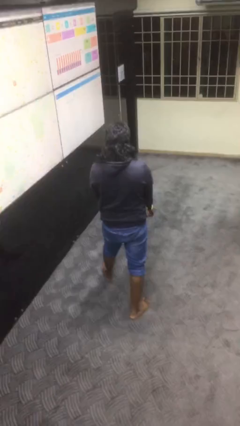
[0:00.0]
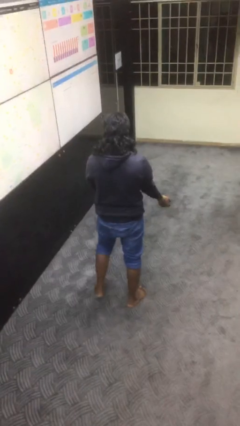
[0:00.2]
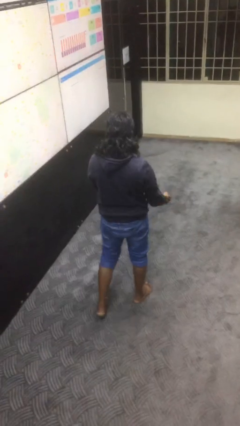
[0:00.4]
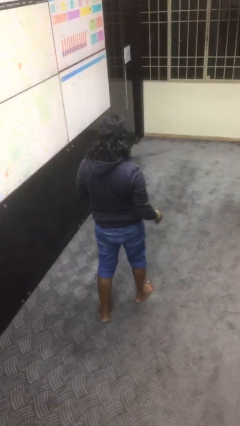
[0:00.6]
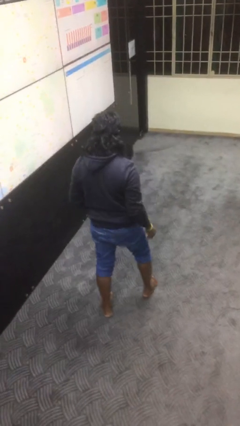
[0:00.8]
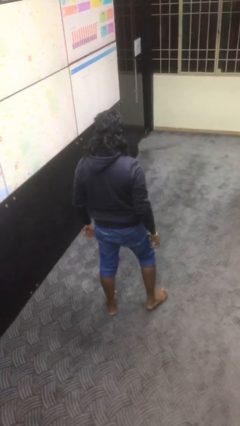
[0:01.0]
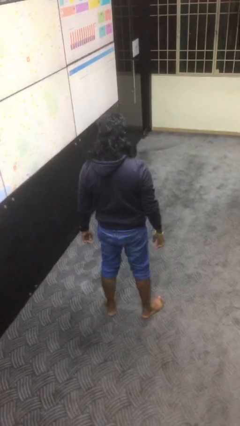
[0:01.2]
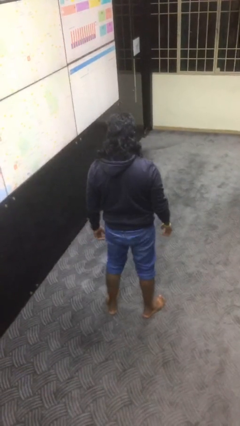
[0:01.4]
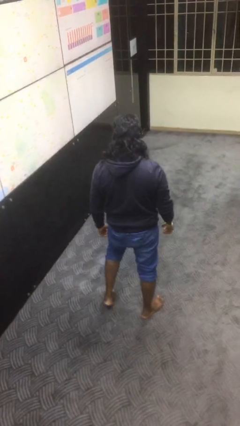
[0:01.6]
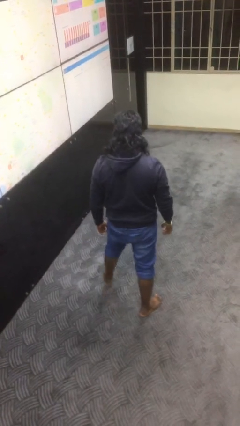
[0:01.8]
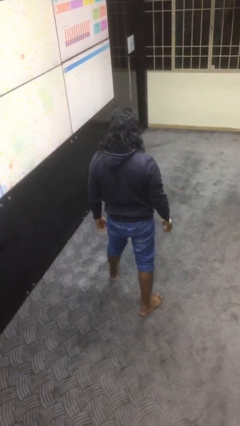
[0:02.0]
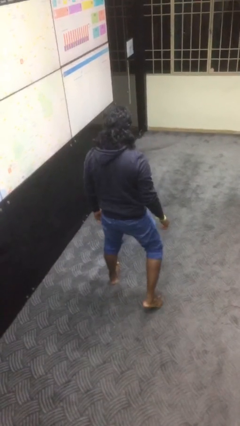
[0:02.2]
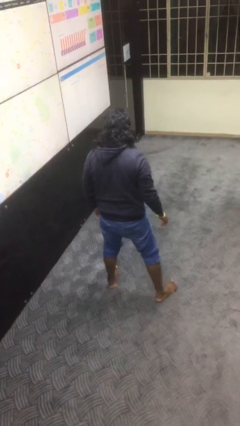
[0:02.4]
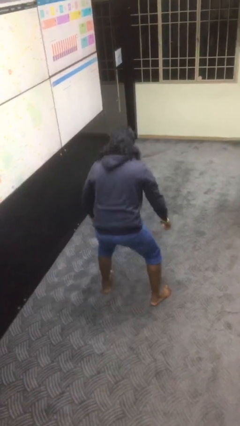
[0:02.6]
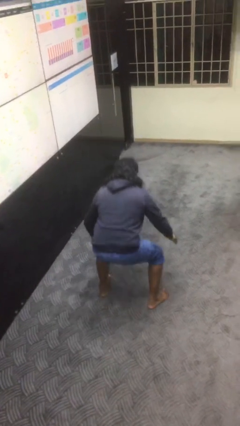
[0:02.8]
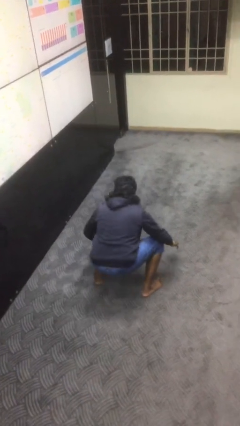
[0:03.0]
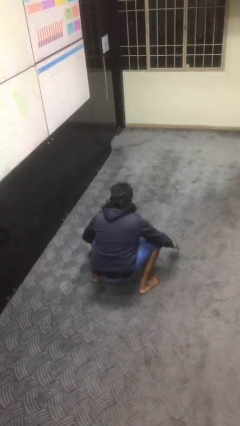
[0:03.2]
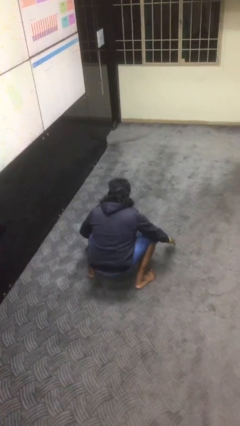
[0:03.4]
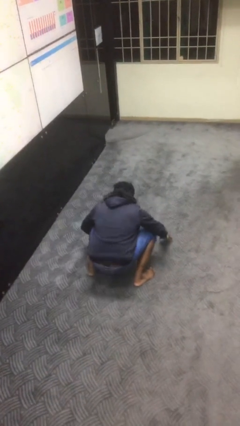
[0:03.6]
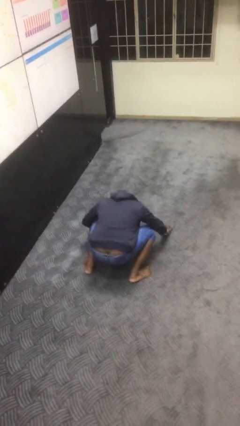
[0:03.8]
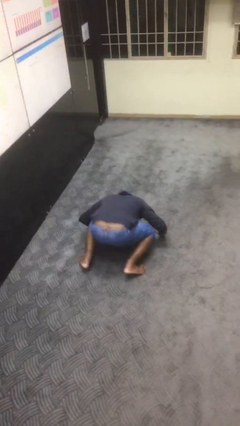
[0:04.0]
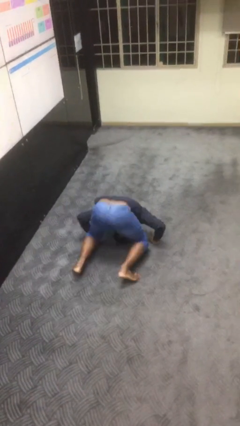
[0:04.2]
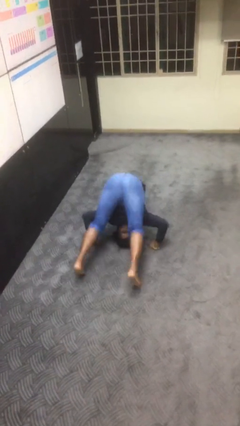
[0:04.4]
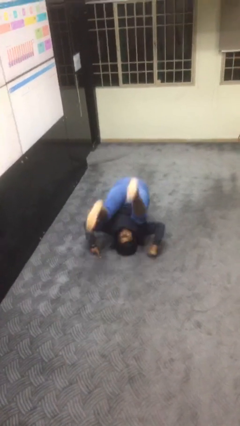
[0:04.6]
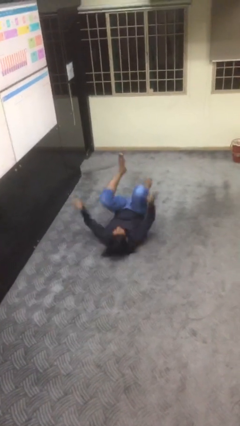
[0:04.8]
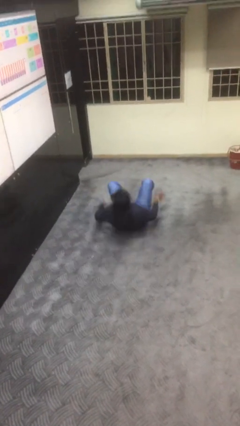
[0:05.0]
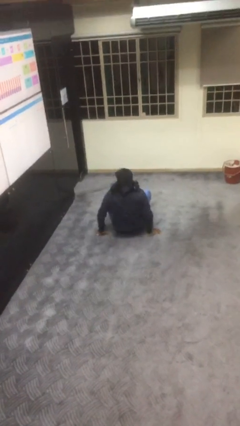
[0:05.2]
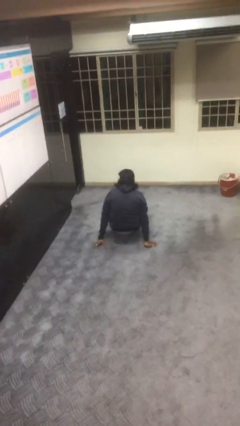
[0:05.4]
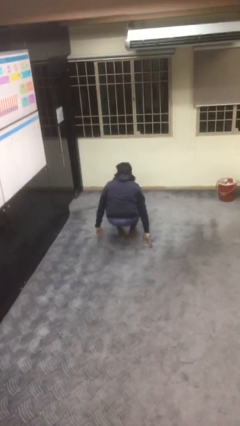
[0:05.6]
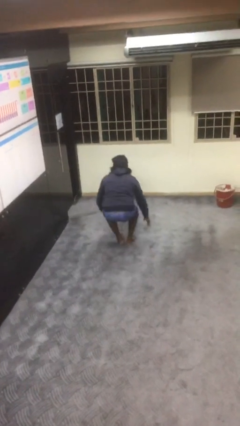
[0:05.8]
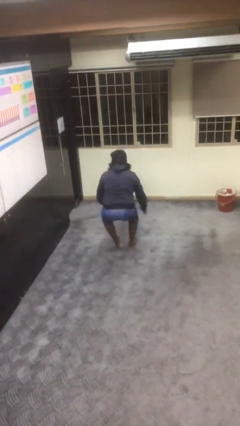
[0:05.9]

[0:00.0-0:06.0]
person somersaults

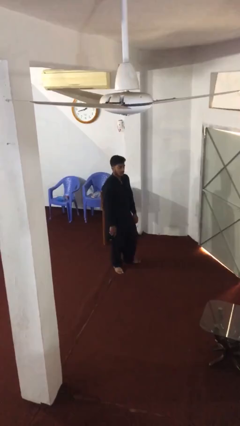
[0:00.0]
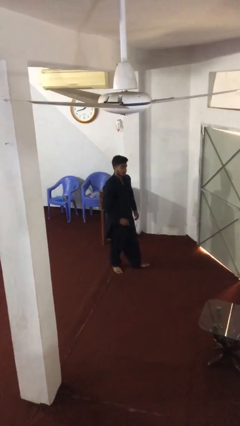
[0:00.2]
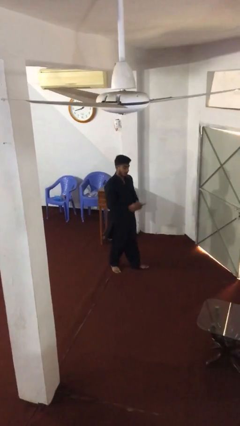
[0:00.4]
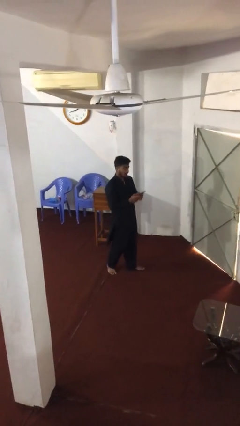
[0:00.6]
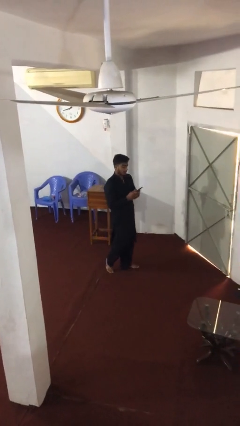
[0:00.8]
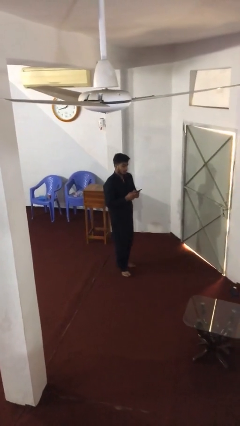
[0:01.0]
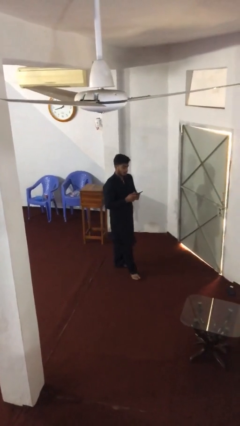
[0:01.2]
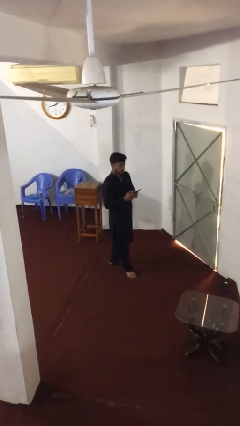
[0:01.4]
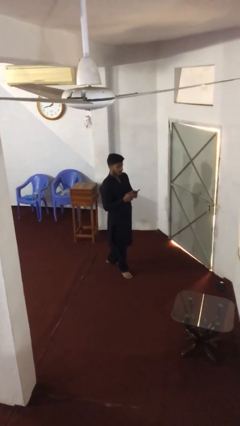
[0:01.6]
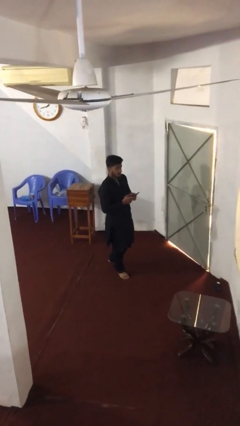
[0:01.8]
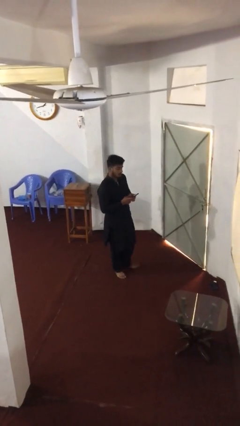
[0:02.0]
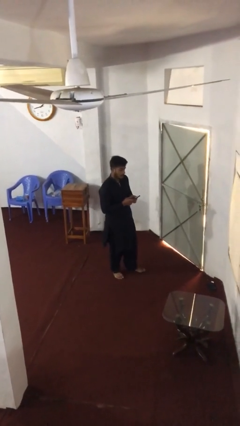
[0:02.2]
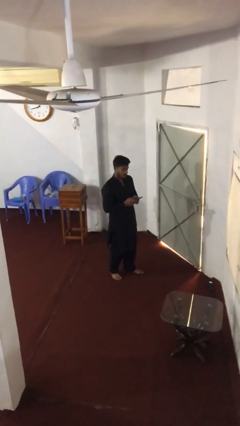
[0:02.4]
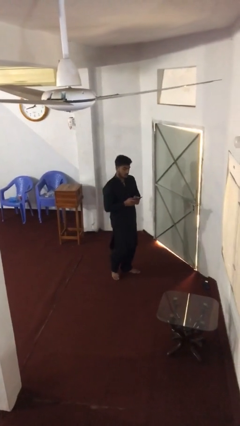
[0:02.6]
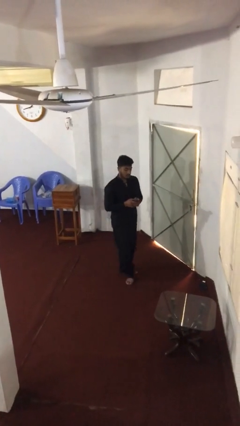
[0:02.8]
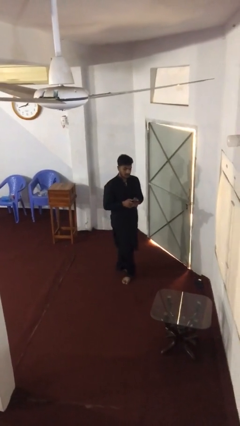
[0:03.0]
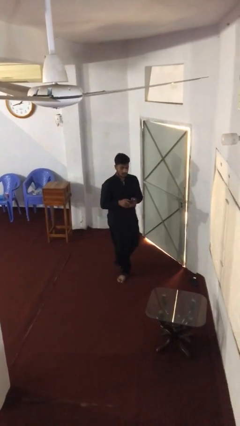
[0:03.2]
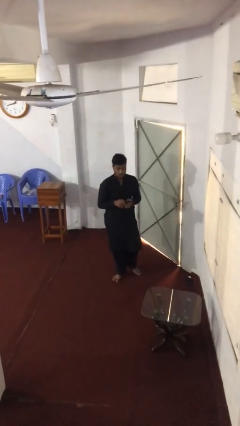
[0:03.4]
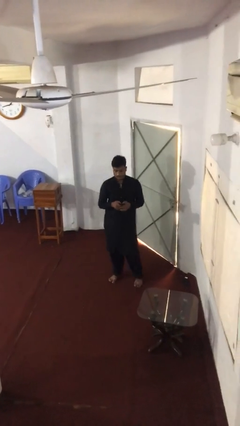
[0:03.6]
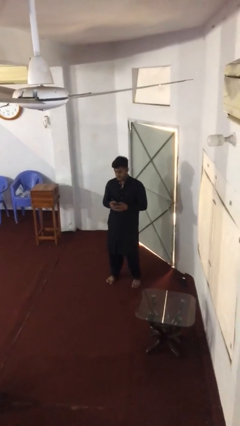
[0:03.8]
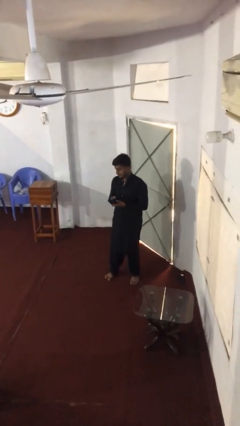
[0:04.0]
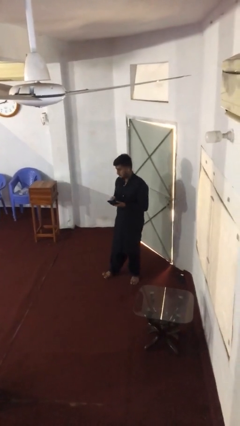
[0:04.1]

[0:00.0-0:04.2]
person texts on phone

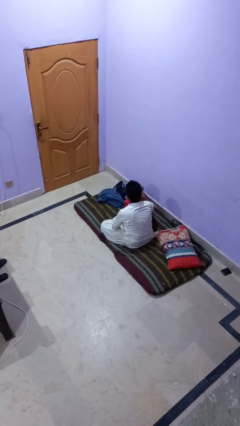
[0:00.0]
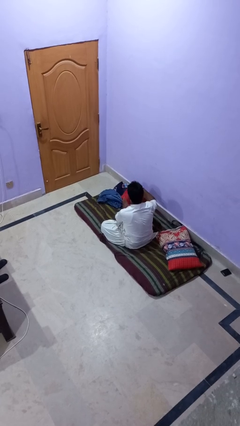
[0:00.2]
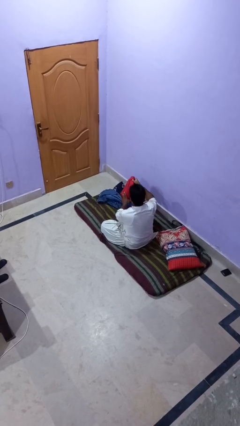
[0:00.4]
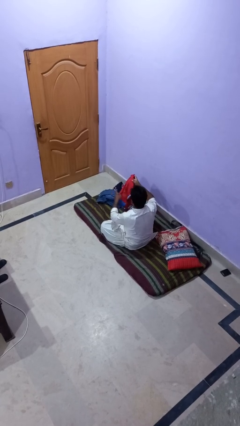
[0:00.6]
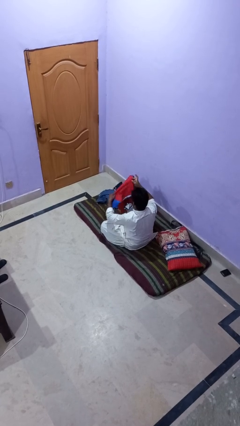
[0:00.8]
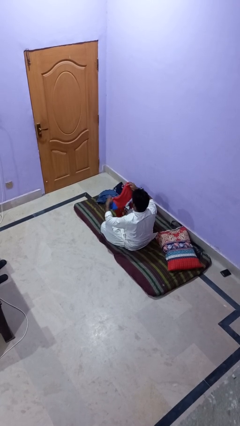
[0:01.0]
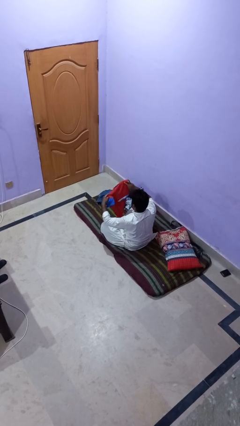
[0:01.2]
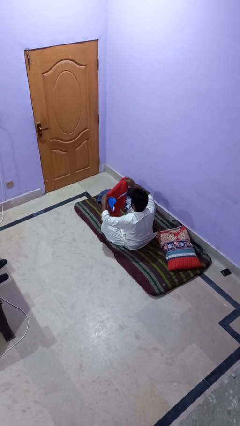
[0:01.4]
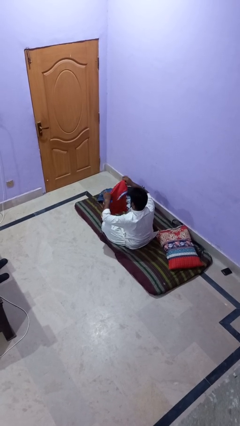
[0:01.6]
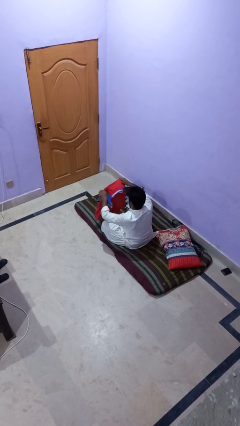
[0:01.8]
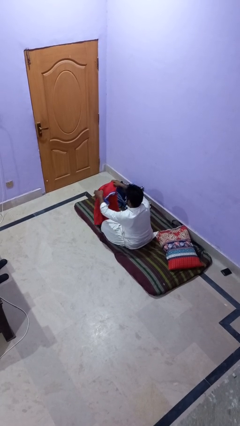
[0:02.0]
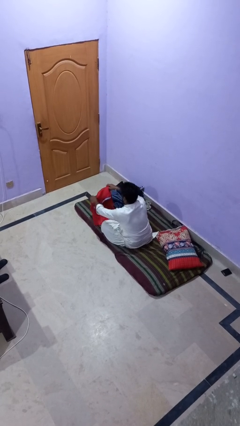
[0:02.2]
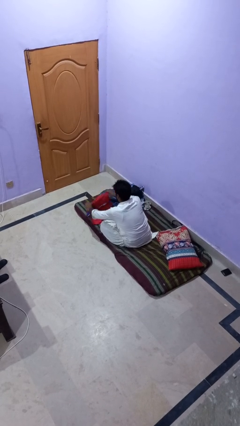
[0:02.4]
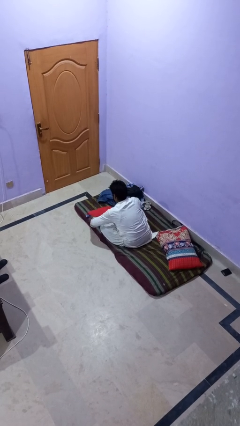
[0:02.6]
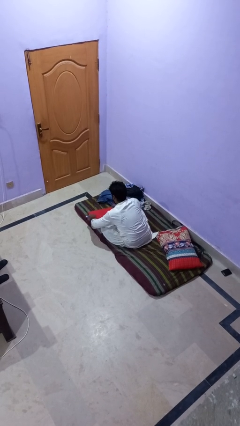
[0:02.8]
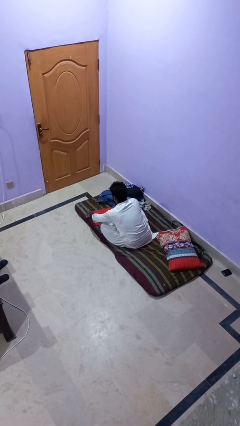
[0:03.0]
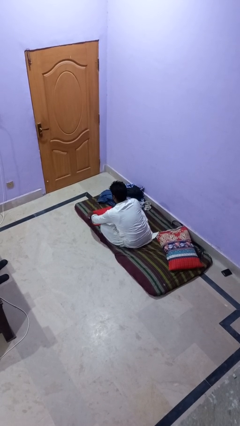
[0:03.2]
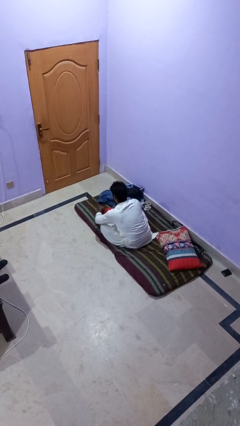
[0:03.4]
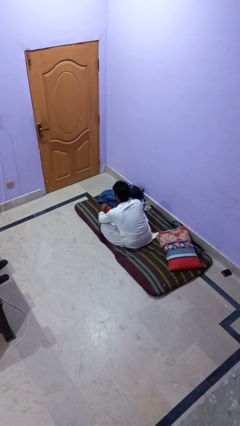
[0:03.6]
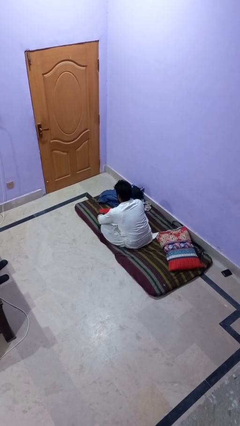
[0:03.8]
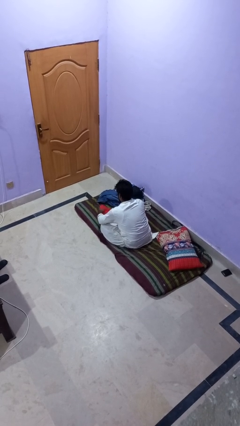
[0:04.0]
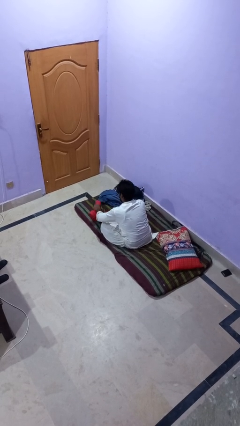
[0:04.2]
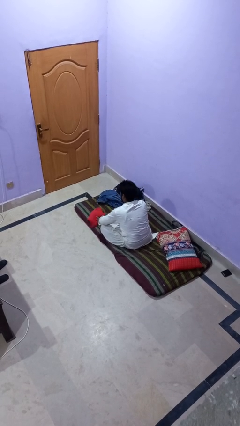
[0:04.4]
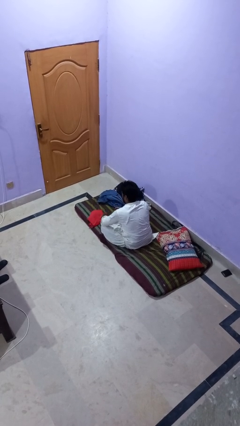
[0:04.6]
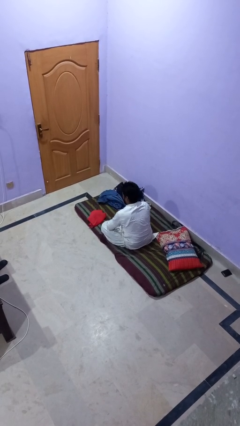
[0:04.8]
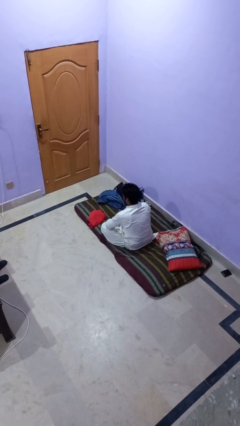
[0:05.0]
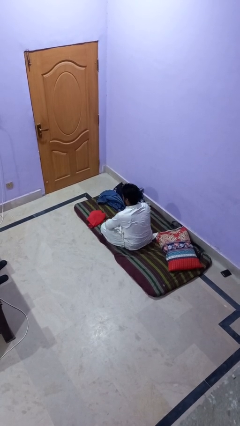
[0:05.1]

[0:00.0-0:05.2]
person folds shirt

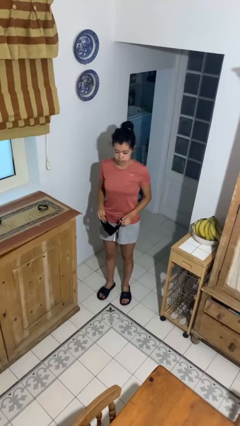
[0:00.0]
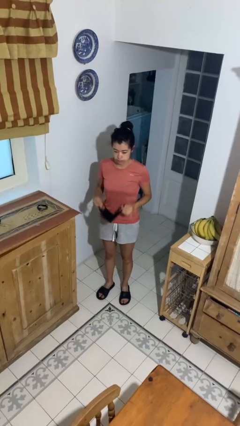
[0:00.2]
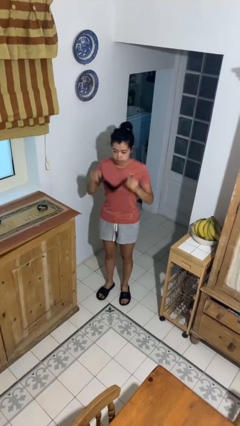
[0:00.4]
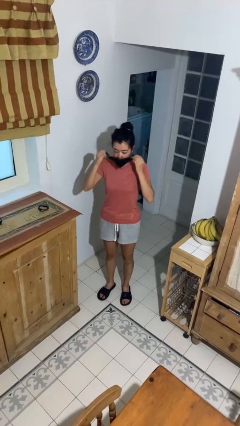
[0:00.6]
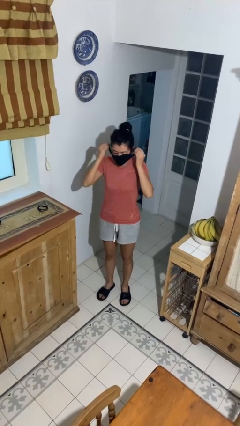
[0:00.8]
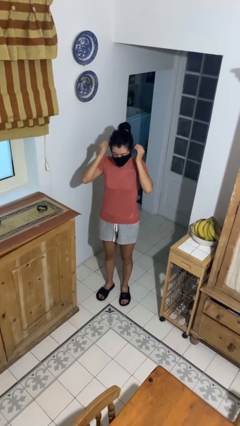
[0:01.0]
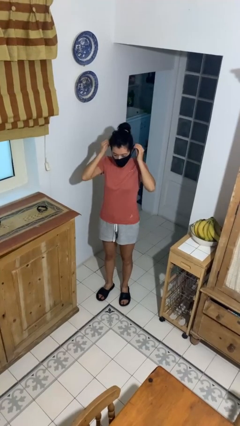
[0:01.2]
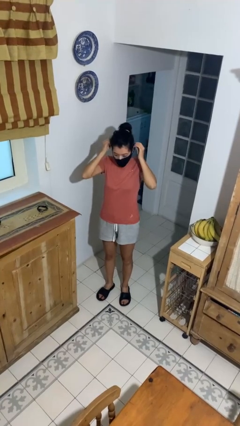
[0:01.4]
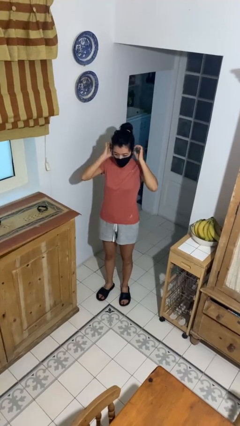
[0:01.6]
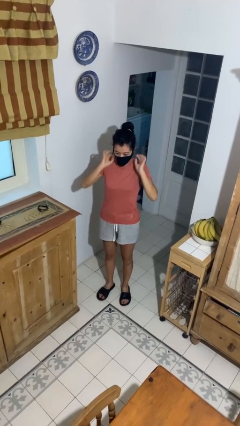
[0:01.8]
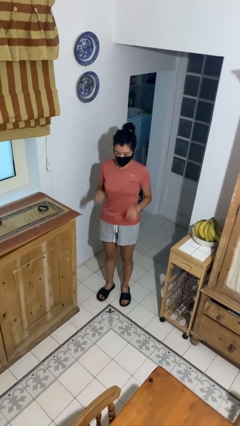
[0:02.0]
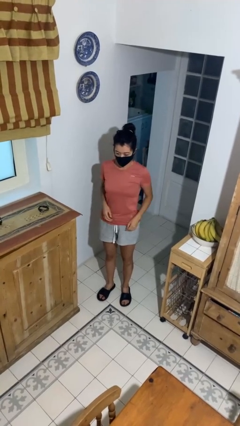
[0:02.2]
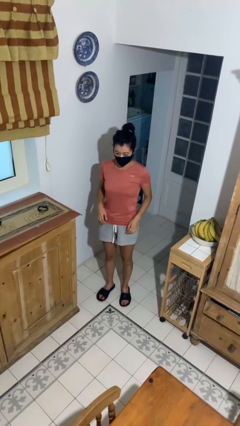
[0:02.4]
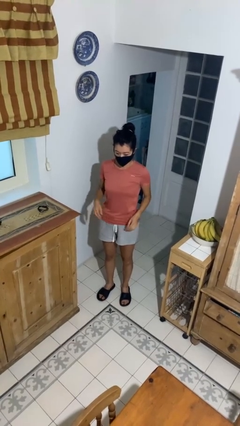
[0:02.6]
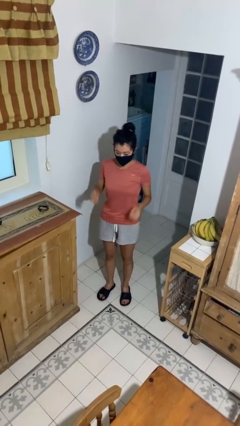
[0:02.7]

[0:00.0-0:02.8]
person puts on facemask
